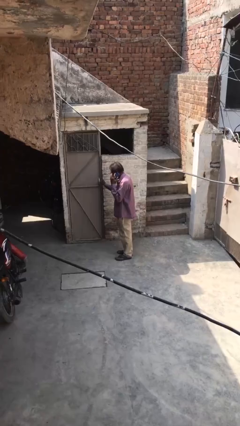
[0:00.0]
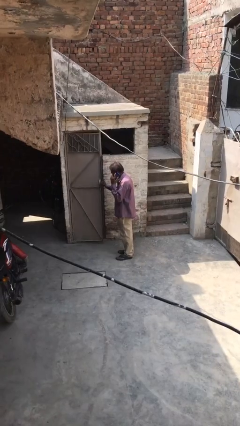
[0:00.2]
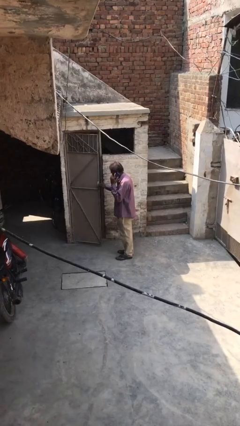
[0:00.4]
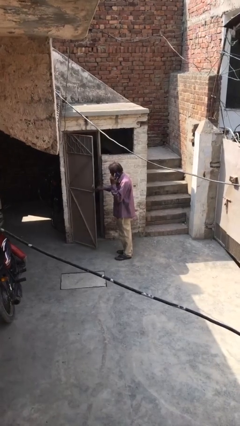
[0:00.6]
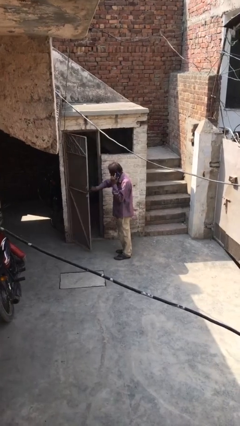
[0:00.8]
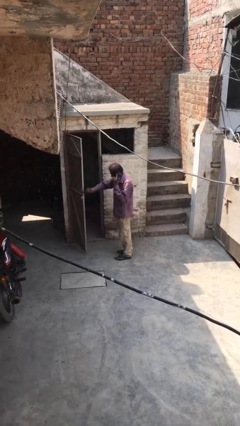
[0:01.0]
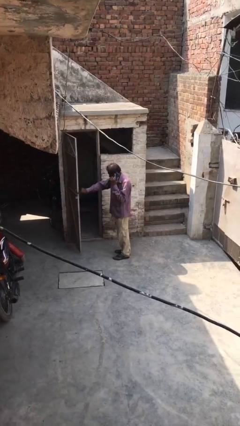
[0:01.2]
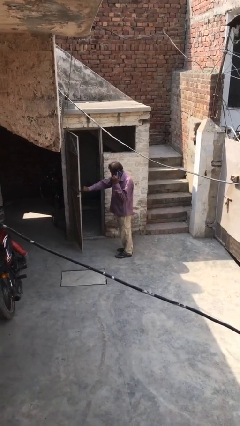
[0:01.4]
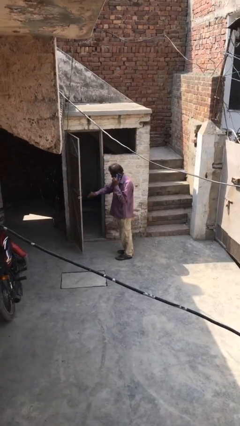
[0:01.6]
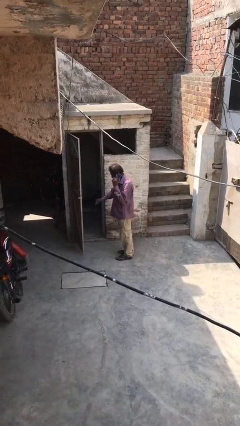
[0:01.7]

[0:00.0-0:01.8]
person opens facility door

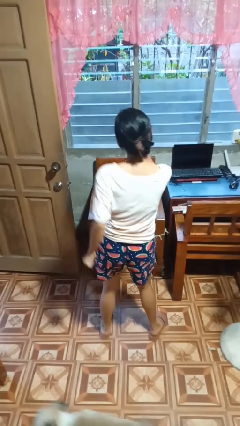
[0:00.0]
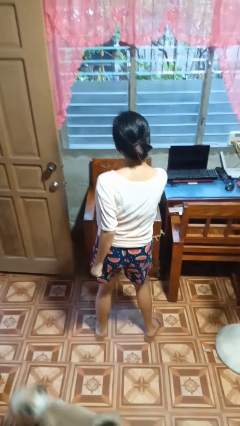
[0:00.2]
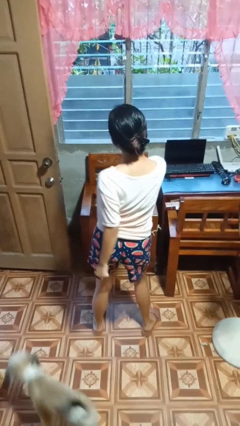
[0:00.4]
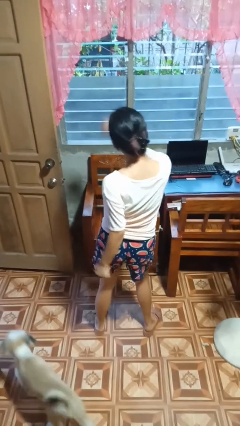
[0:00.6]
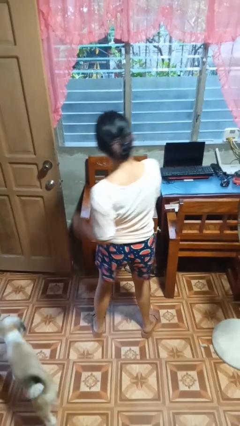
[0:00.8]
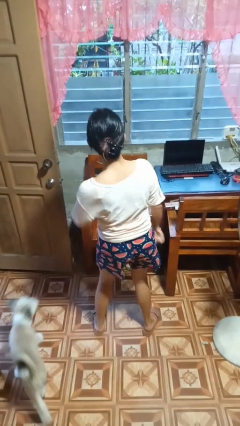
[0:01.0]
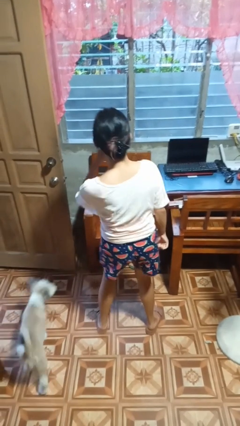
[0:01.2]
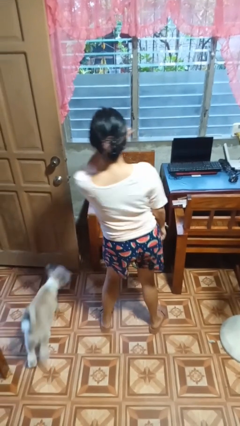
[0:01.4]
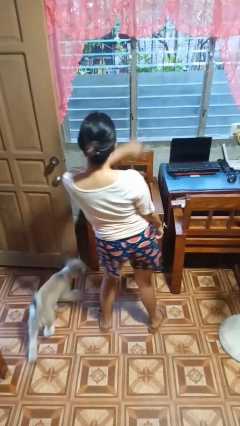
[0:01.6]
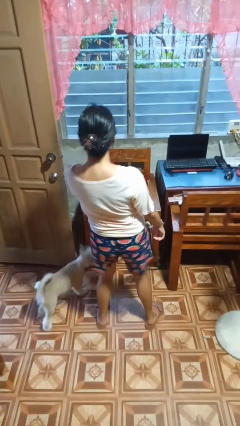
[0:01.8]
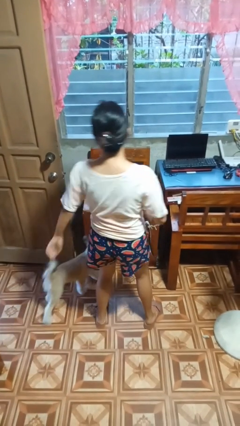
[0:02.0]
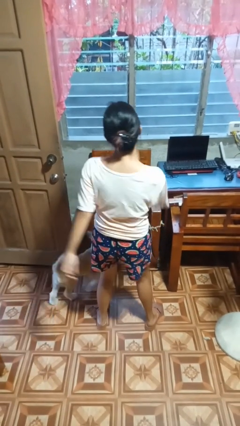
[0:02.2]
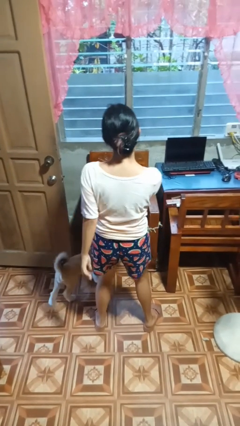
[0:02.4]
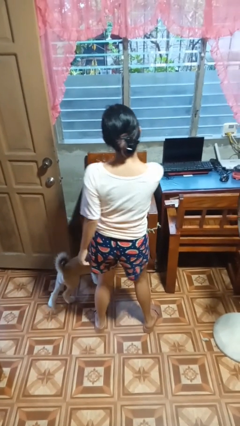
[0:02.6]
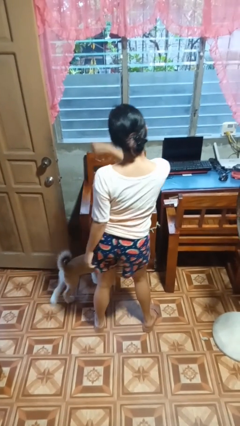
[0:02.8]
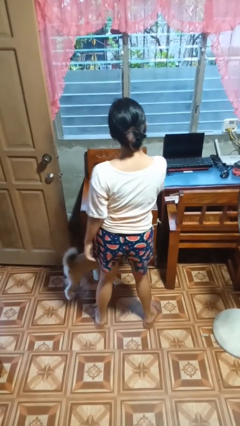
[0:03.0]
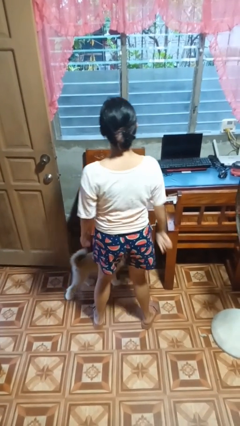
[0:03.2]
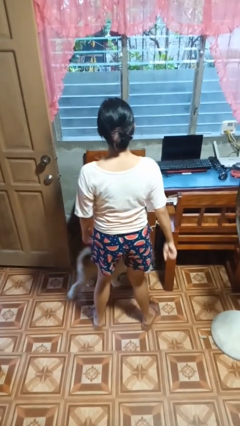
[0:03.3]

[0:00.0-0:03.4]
person dances in place

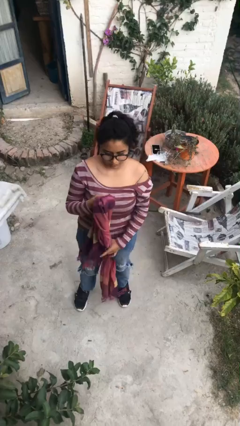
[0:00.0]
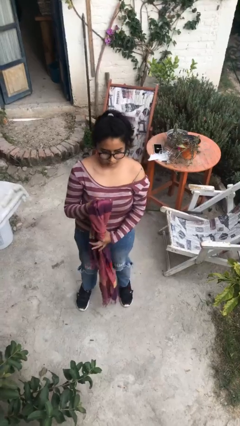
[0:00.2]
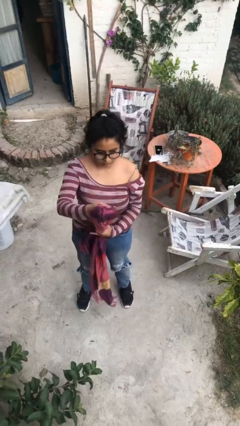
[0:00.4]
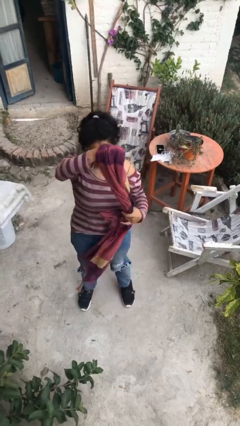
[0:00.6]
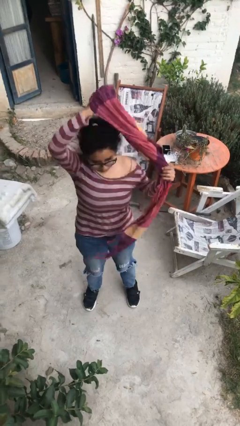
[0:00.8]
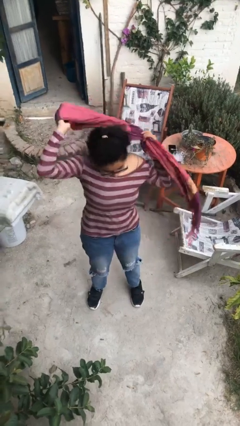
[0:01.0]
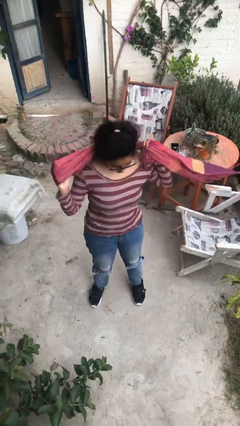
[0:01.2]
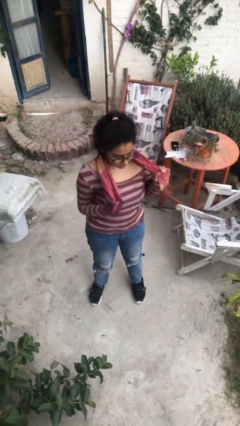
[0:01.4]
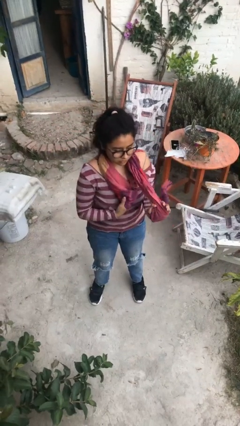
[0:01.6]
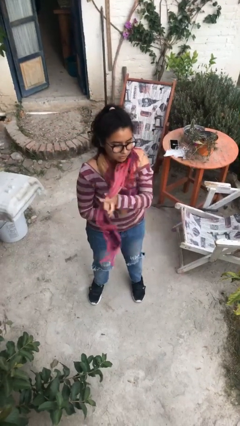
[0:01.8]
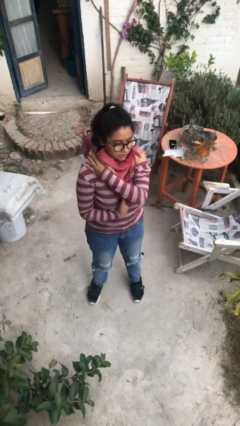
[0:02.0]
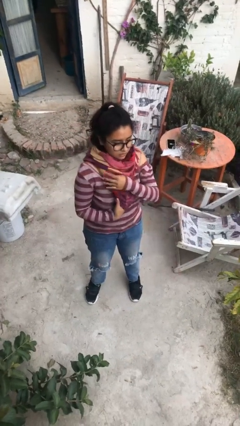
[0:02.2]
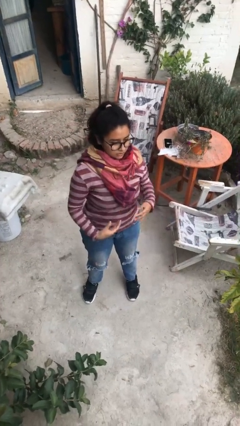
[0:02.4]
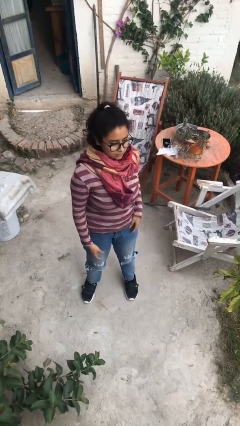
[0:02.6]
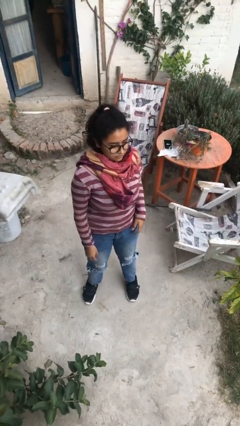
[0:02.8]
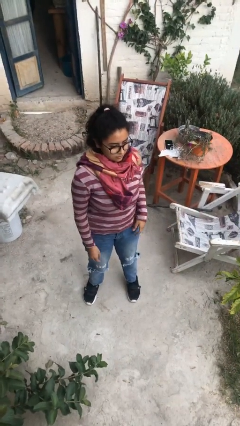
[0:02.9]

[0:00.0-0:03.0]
person puts on scarf

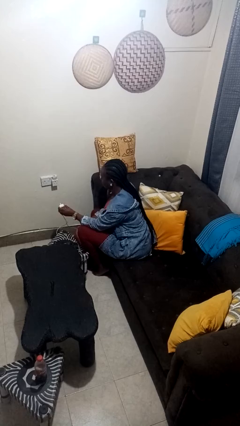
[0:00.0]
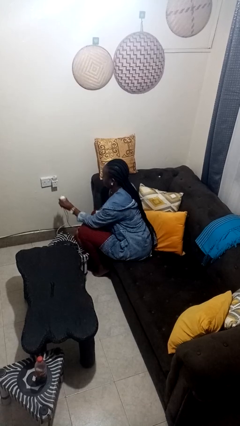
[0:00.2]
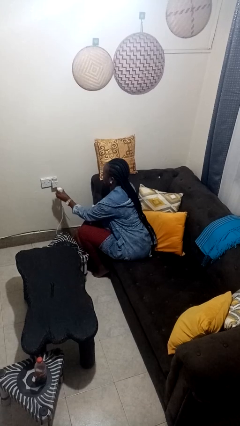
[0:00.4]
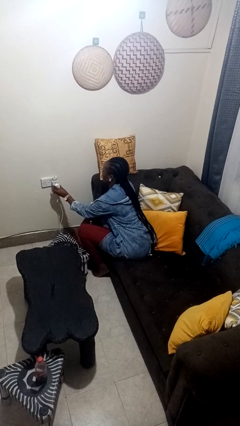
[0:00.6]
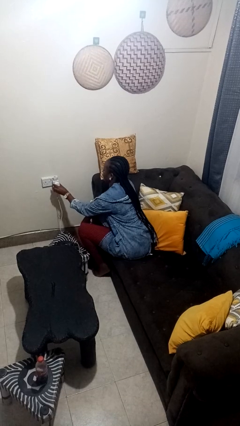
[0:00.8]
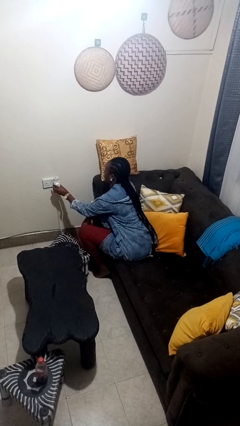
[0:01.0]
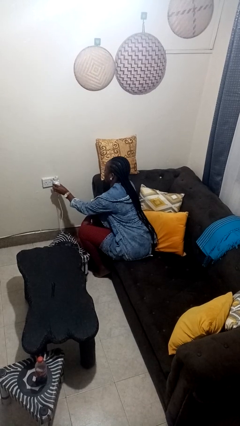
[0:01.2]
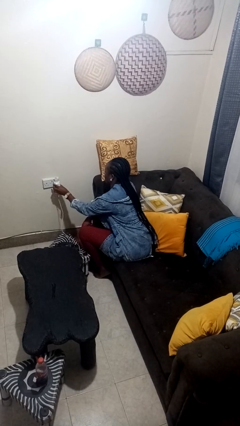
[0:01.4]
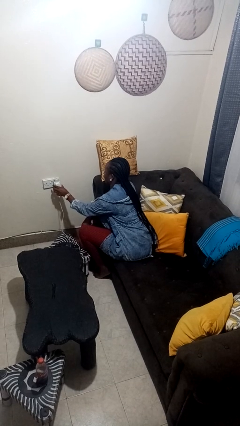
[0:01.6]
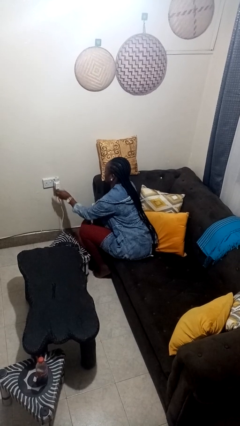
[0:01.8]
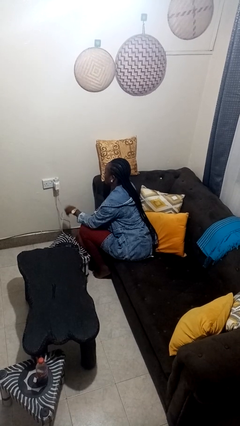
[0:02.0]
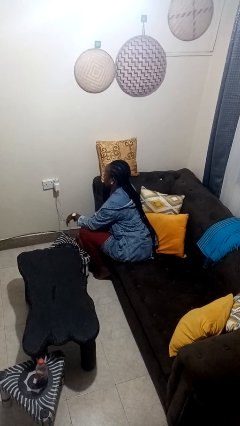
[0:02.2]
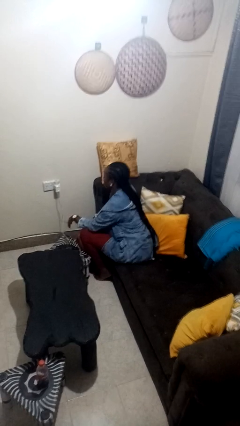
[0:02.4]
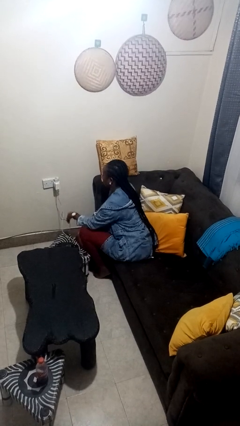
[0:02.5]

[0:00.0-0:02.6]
person plugs into electrical socket

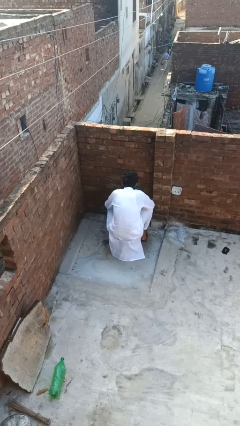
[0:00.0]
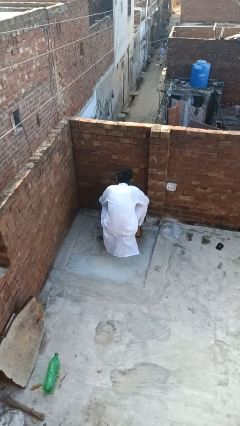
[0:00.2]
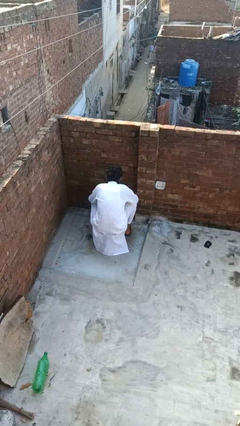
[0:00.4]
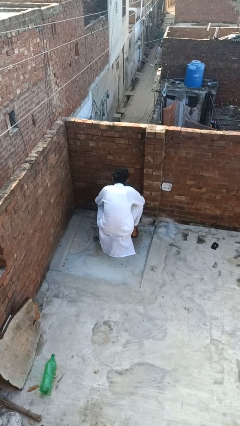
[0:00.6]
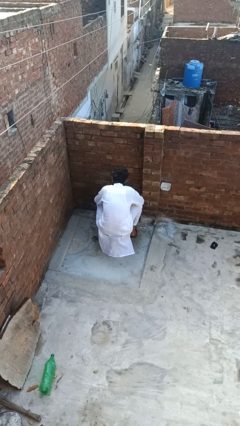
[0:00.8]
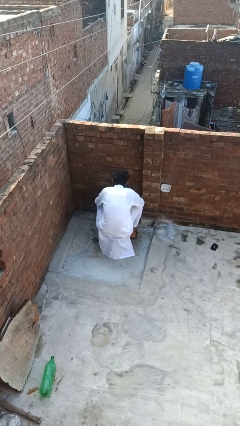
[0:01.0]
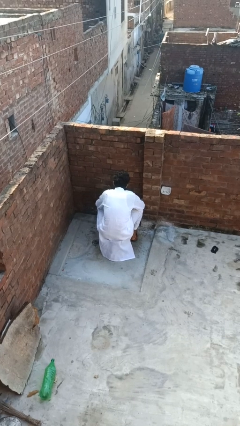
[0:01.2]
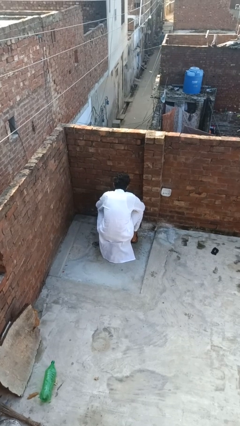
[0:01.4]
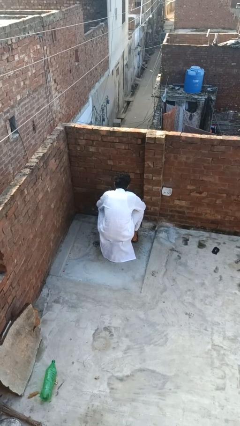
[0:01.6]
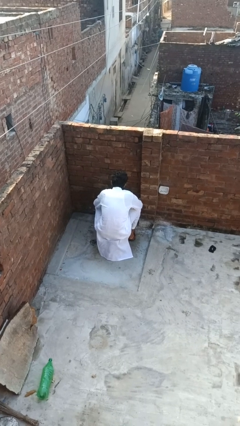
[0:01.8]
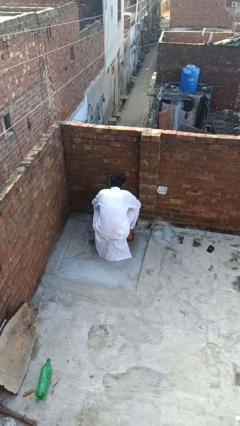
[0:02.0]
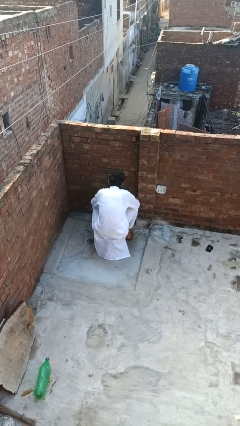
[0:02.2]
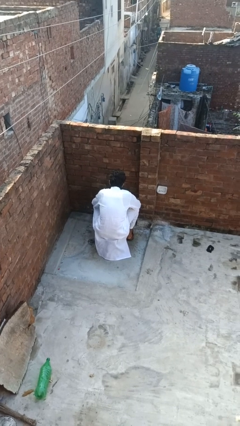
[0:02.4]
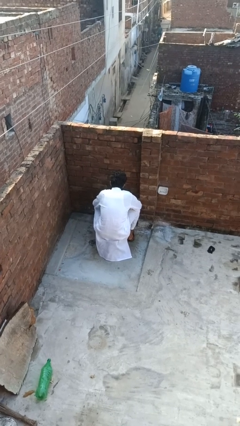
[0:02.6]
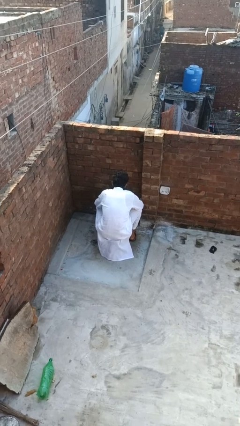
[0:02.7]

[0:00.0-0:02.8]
person turns on faucet

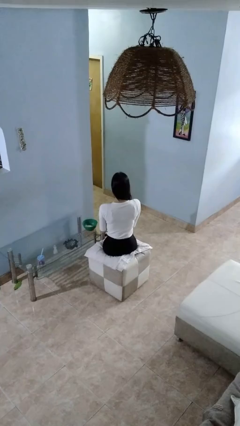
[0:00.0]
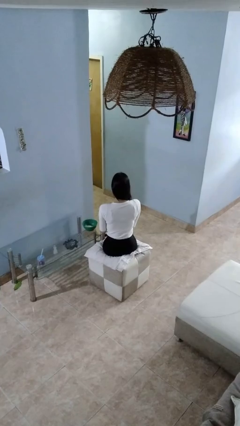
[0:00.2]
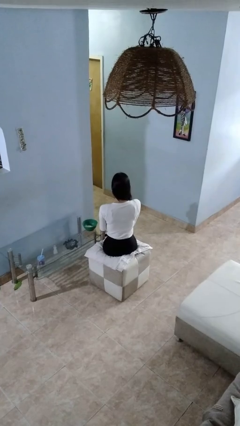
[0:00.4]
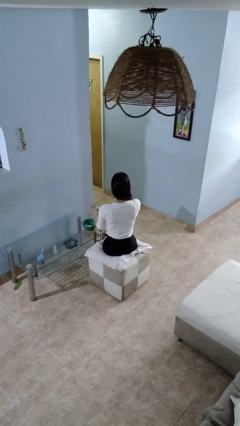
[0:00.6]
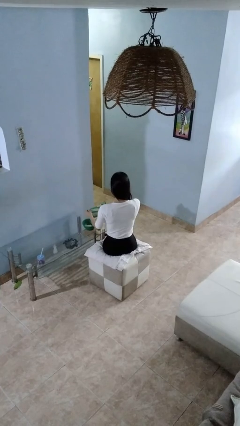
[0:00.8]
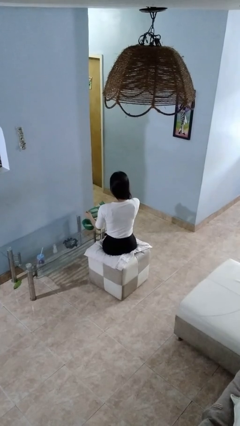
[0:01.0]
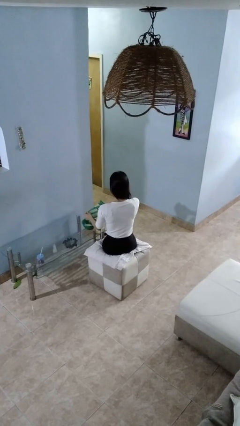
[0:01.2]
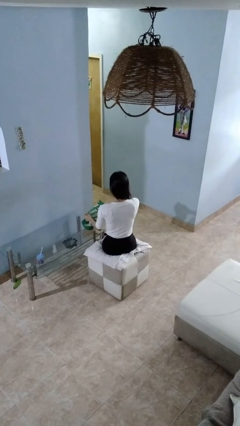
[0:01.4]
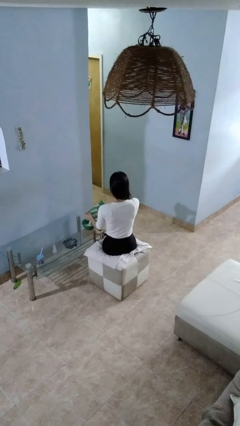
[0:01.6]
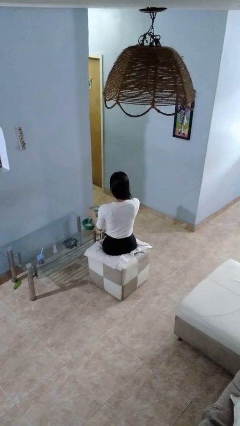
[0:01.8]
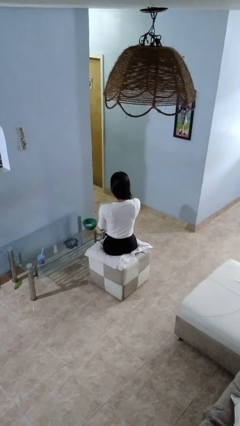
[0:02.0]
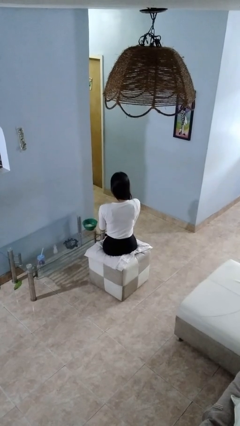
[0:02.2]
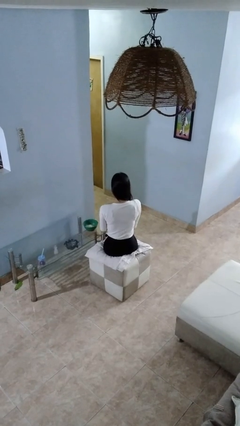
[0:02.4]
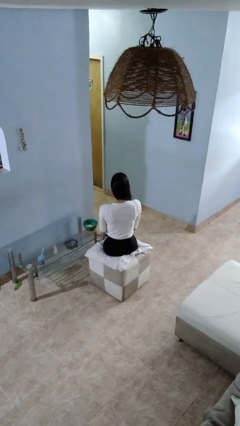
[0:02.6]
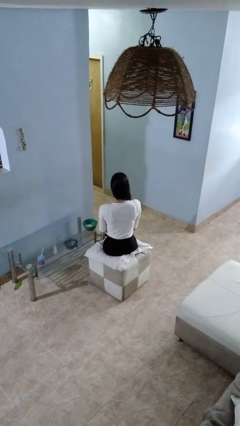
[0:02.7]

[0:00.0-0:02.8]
person pours into bowl

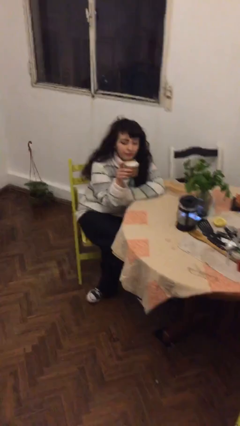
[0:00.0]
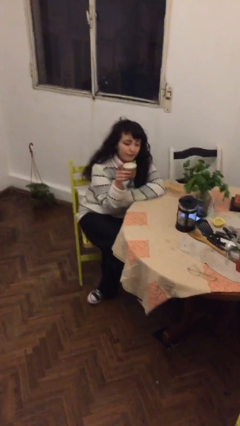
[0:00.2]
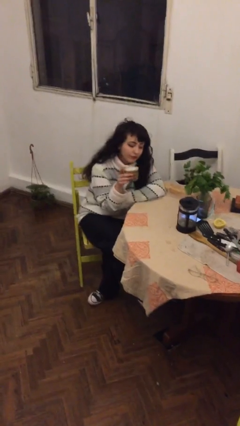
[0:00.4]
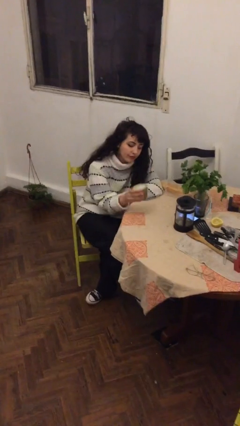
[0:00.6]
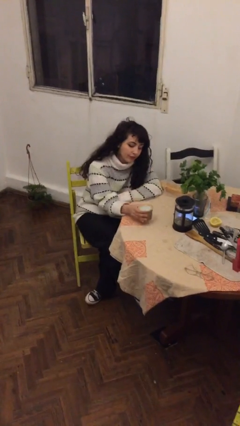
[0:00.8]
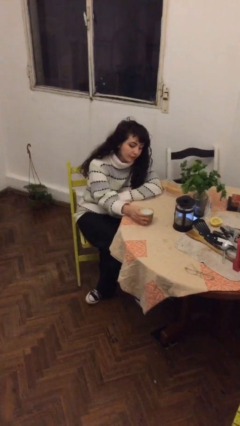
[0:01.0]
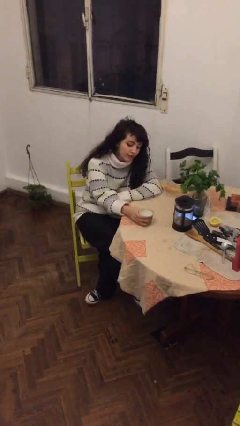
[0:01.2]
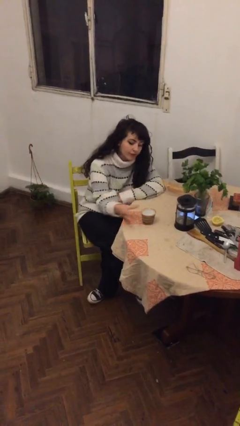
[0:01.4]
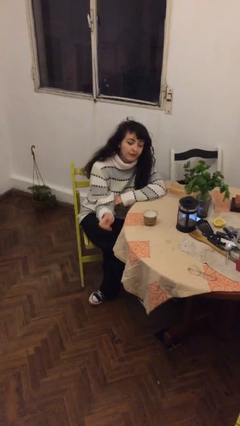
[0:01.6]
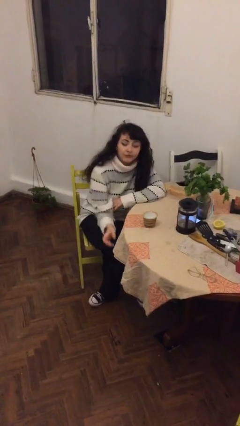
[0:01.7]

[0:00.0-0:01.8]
person puts down object on table
